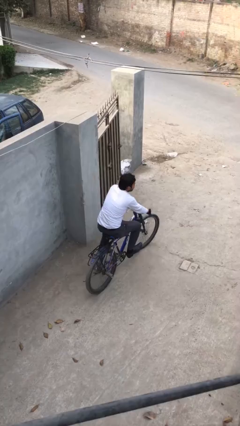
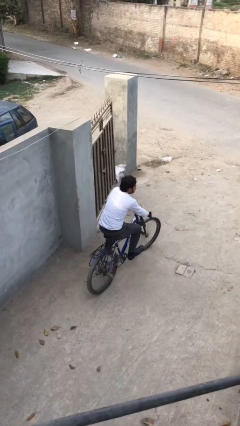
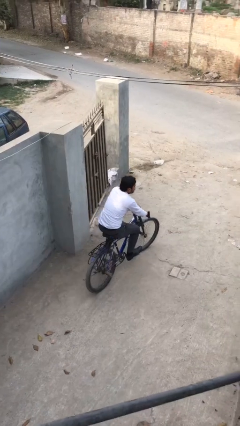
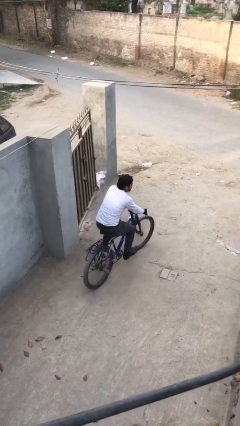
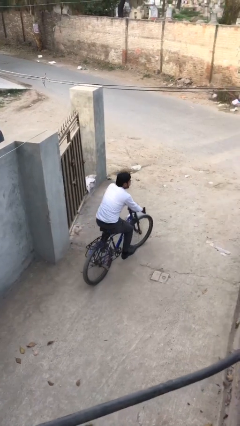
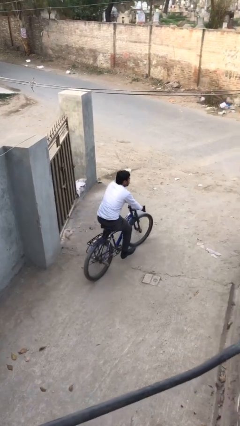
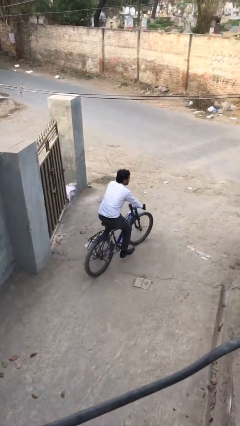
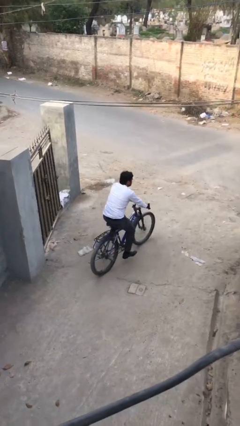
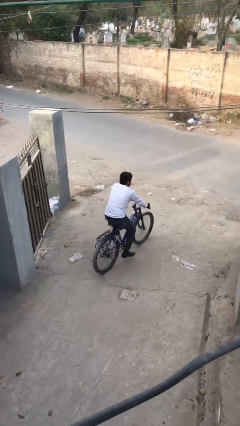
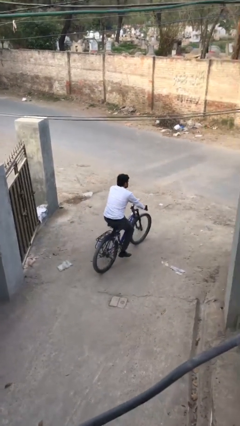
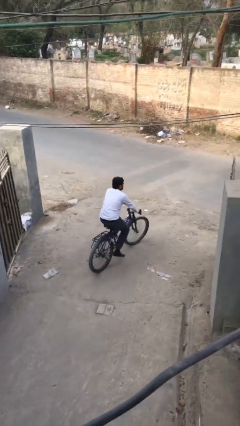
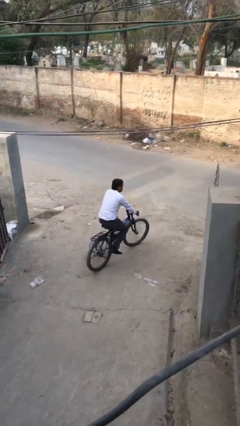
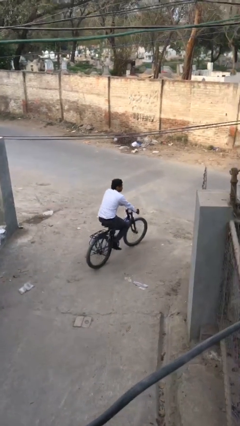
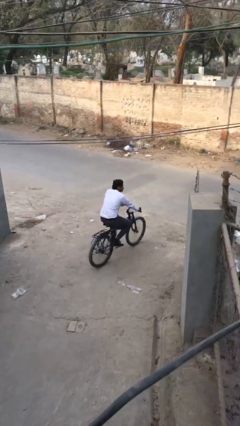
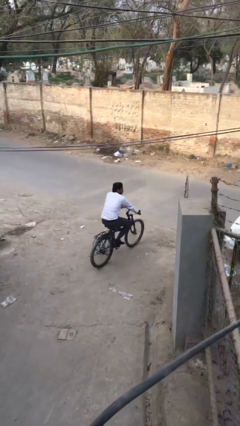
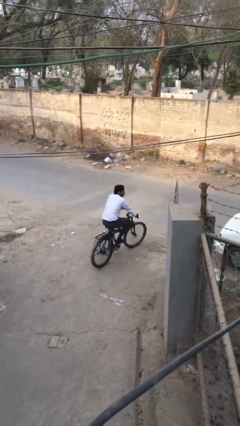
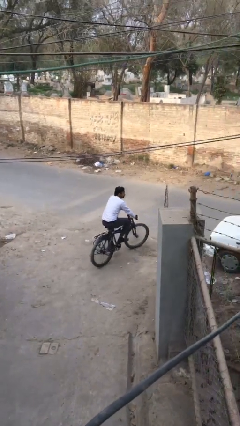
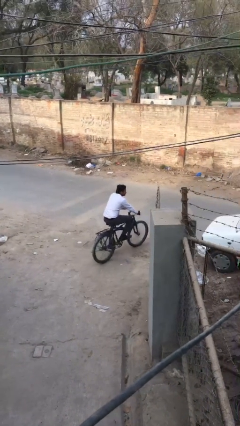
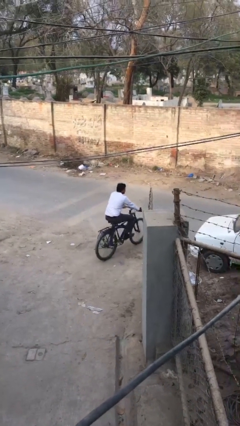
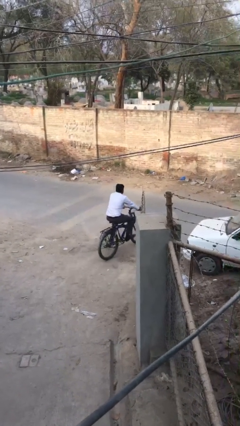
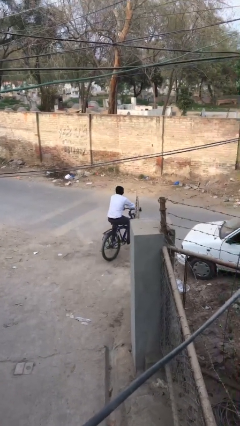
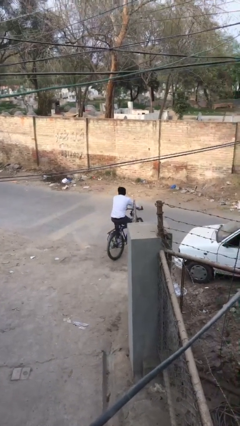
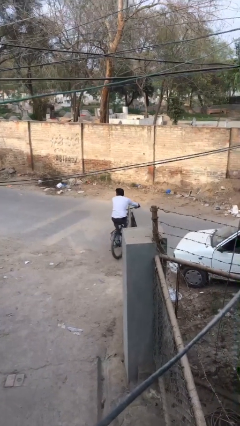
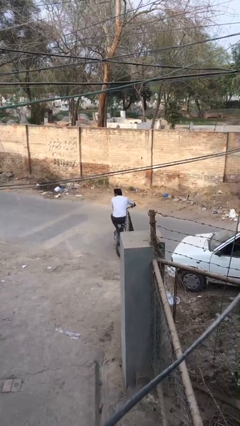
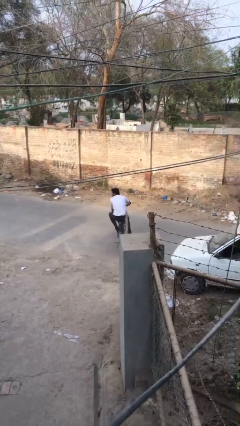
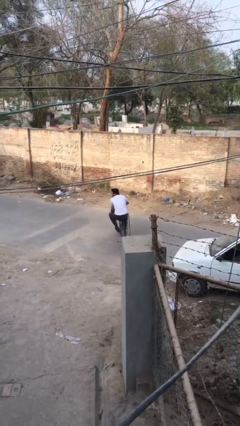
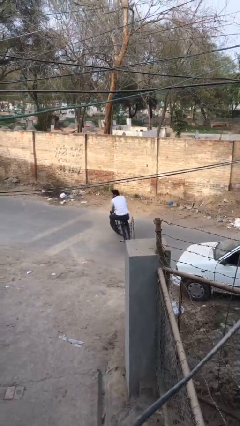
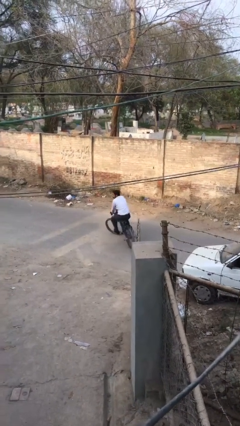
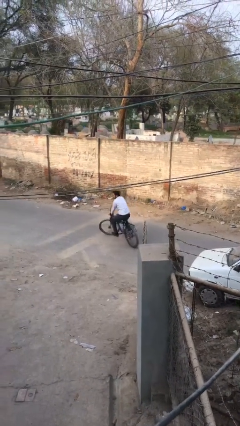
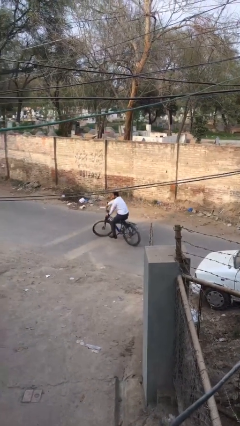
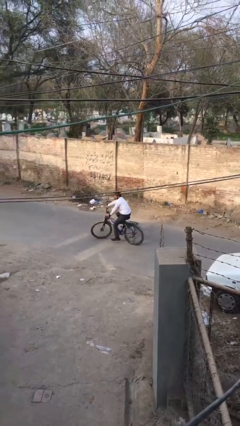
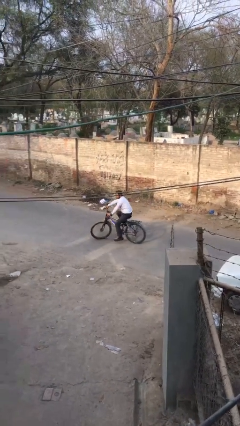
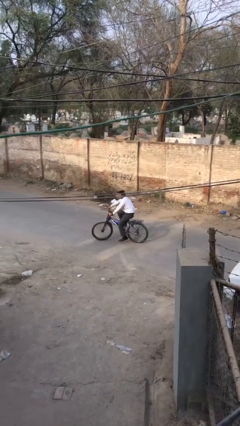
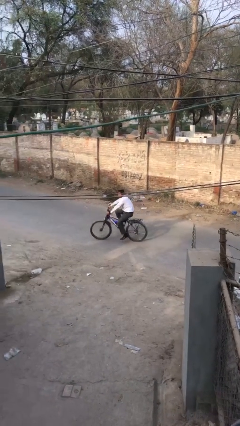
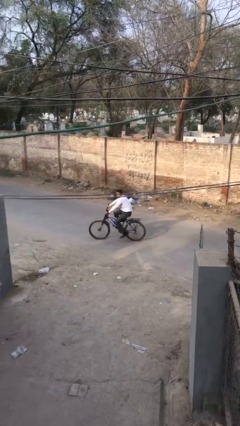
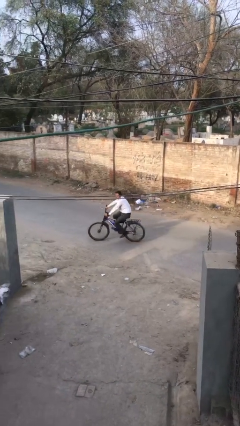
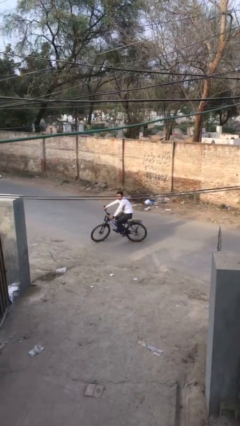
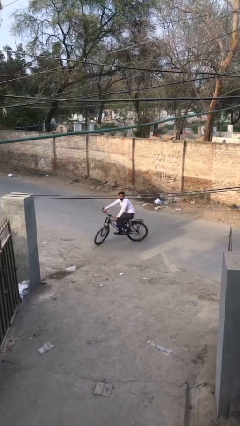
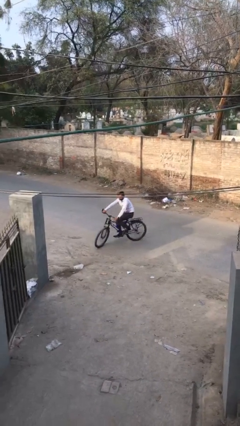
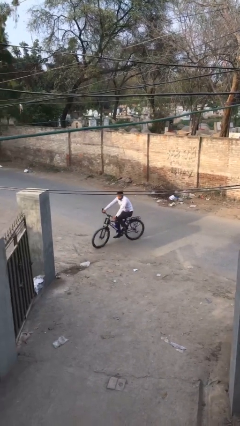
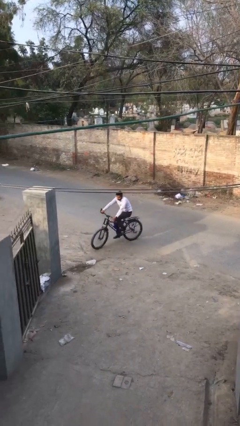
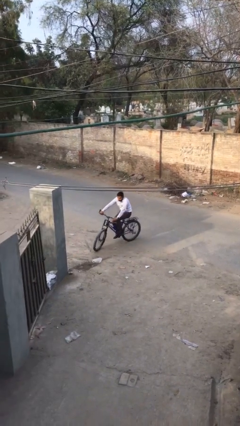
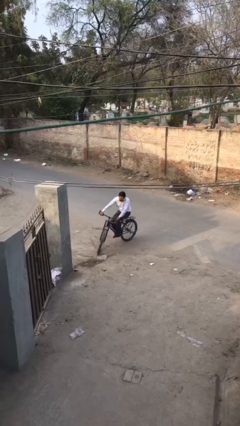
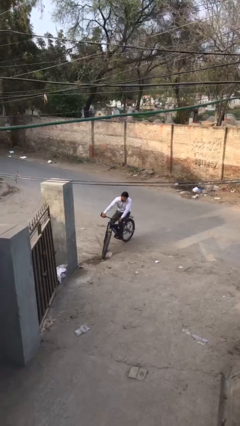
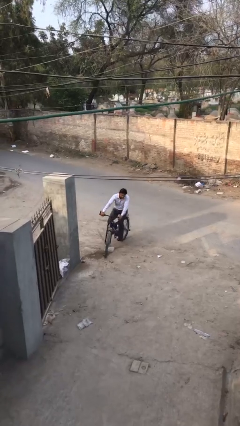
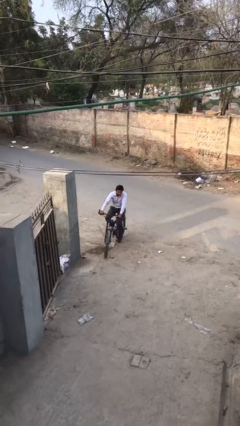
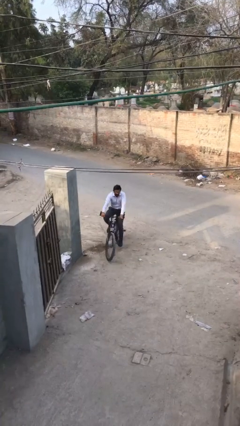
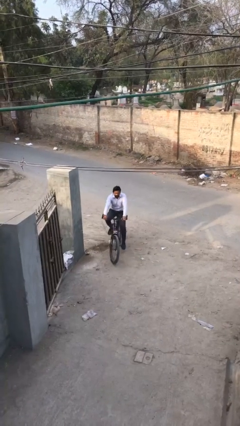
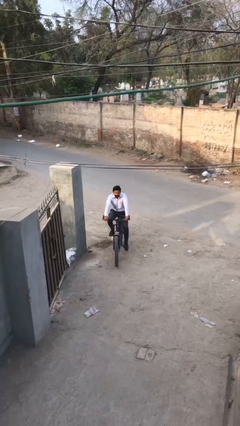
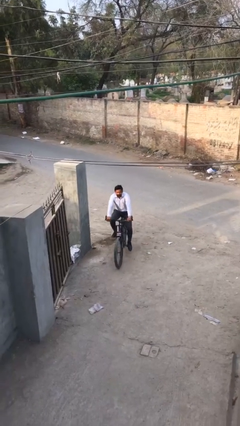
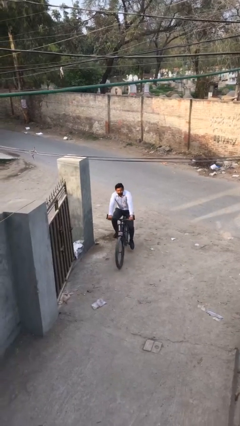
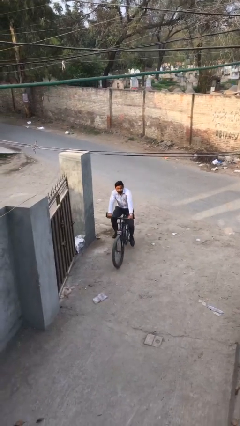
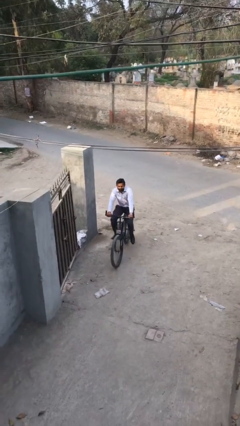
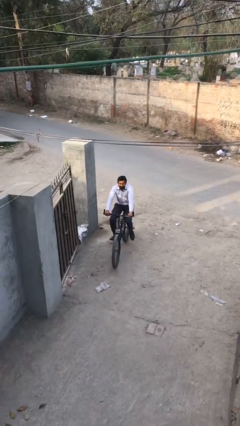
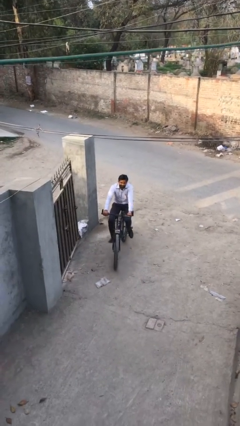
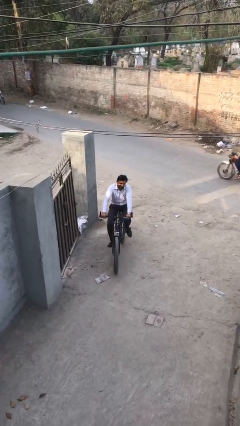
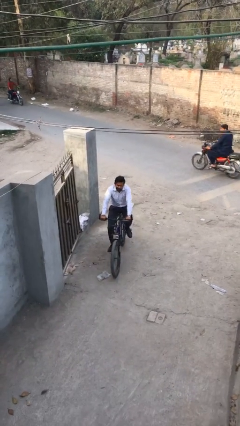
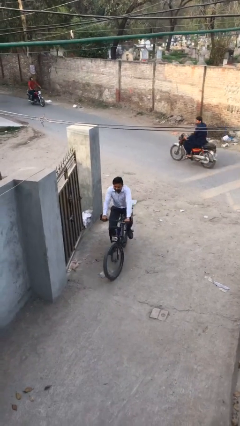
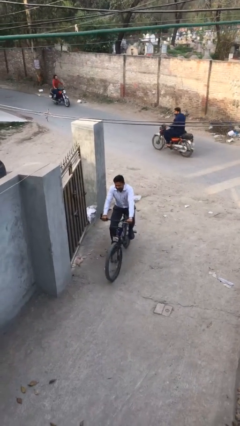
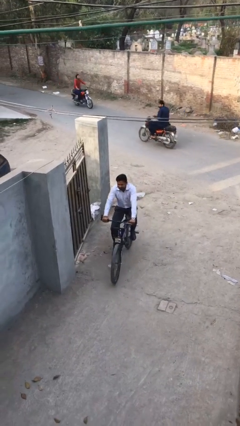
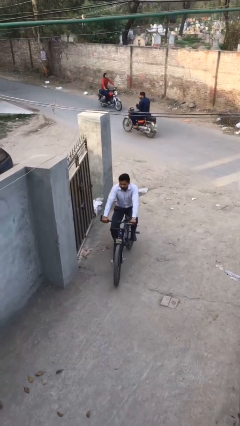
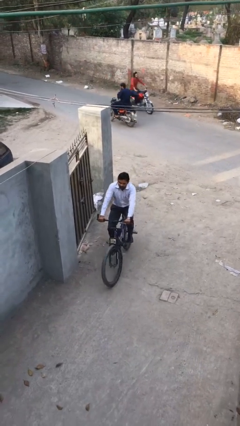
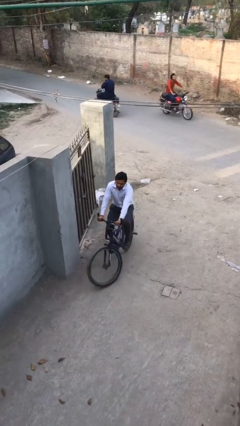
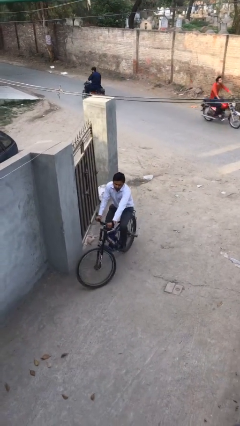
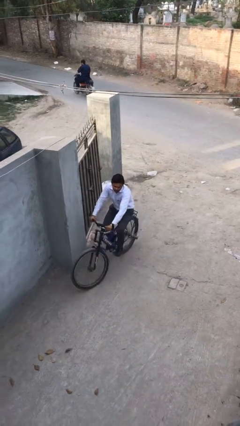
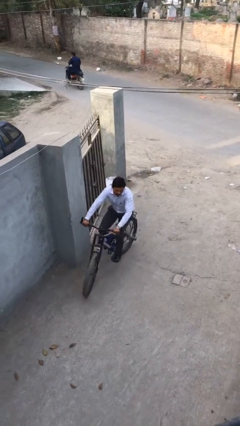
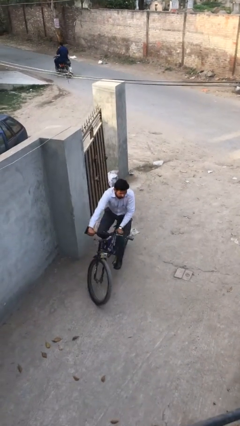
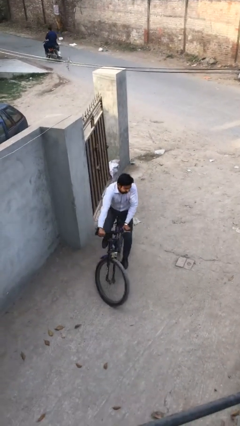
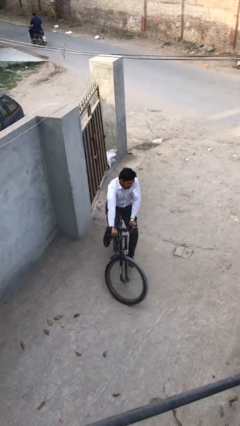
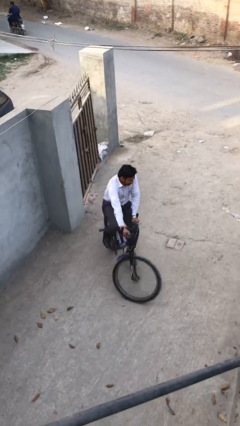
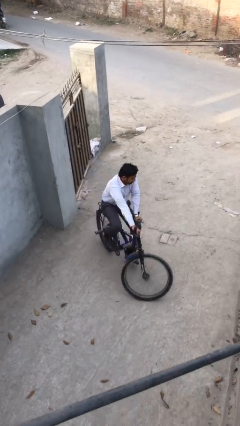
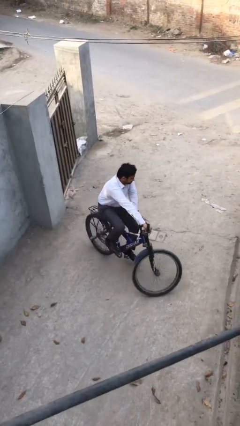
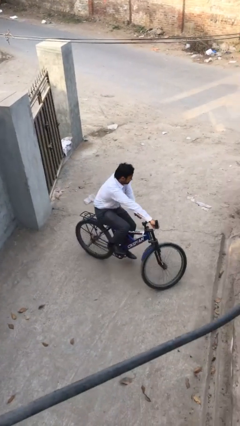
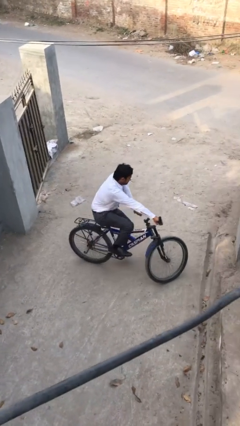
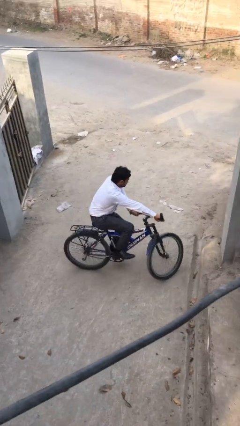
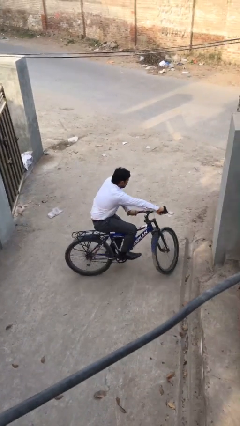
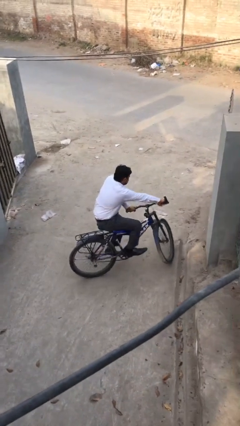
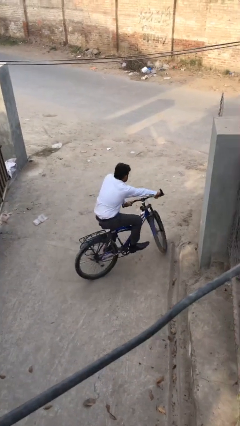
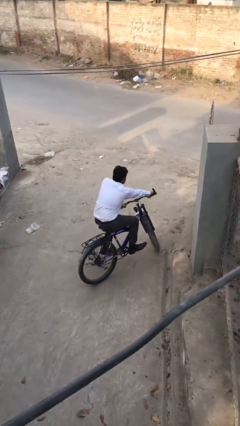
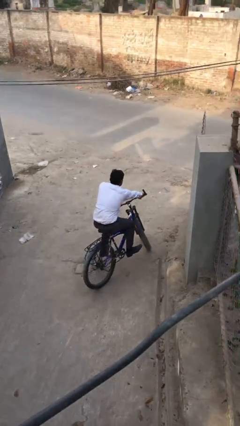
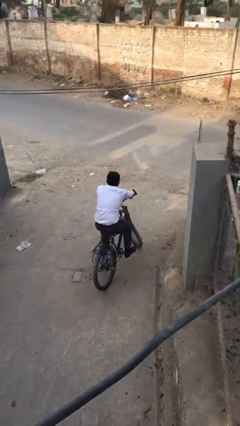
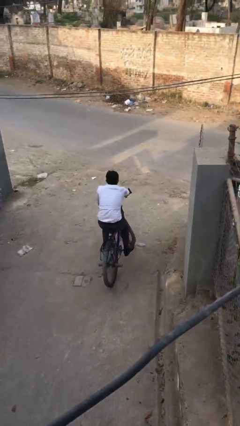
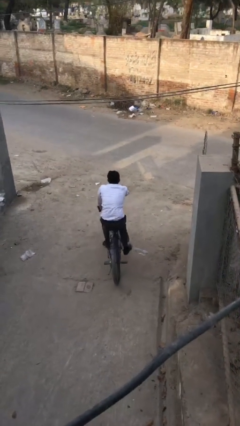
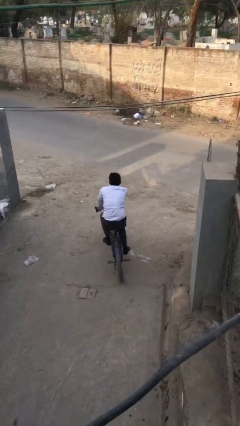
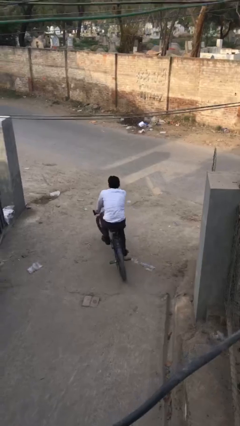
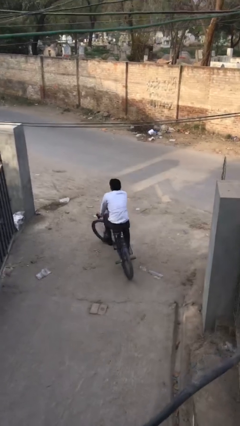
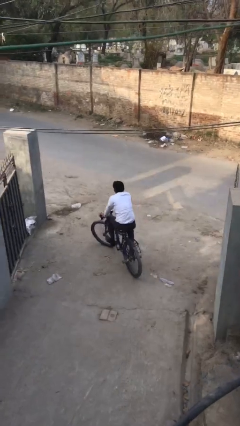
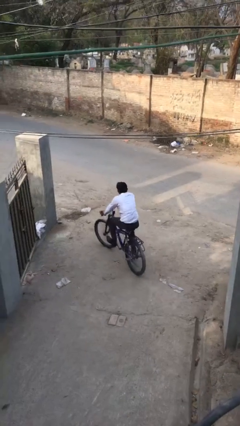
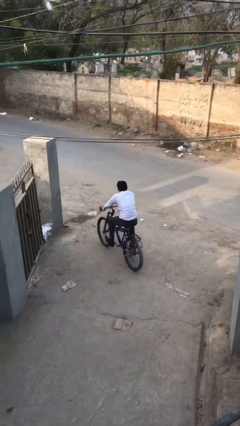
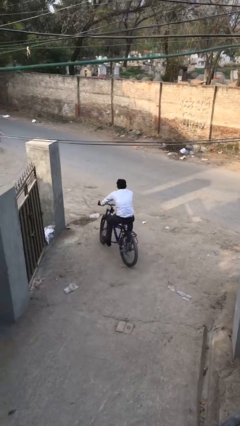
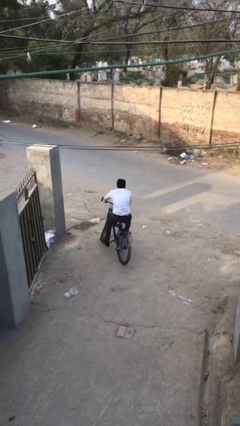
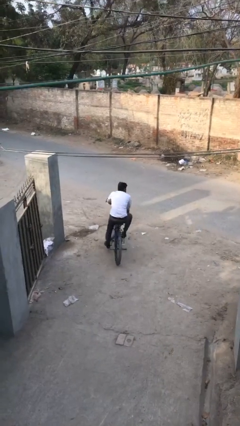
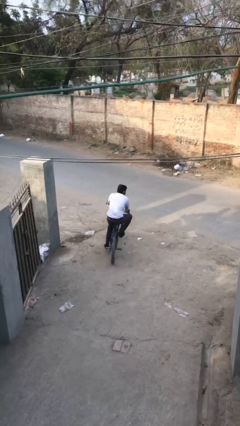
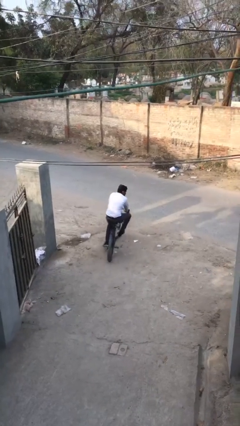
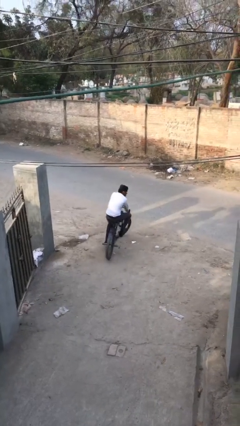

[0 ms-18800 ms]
person rides bicycle

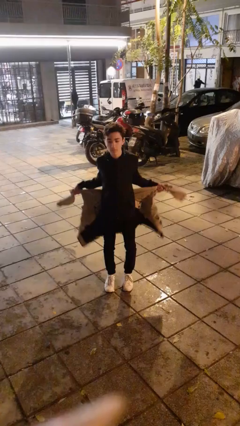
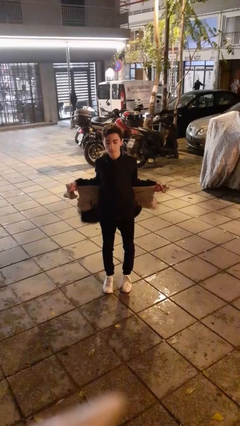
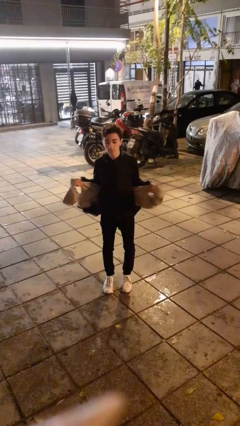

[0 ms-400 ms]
person ties jacket around waist
